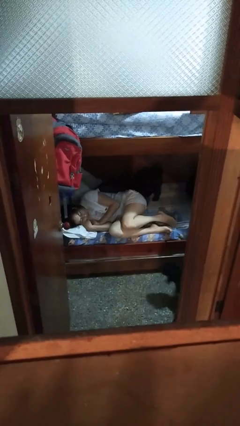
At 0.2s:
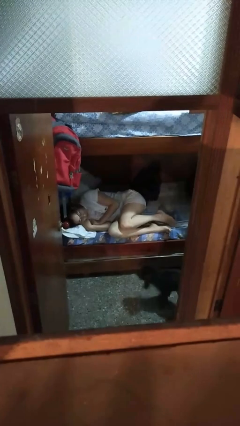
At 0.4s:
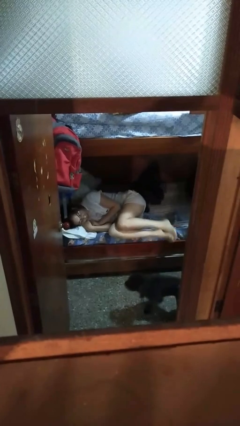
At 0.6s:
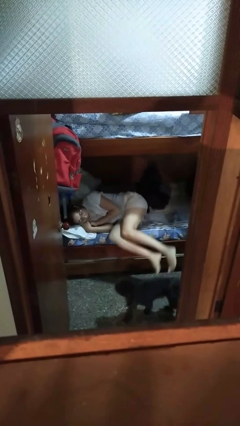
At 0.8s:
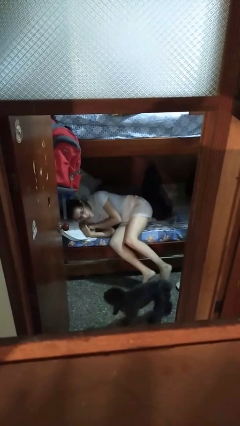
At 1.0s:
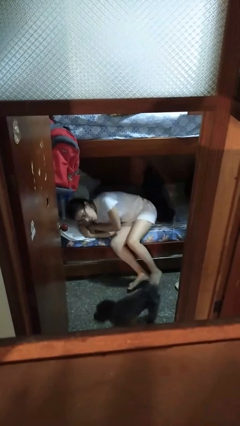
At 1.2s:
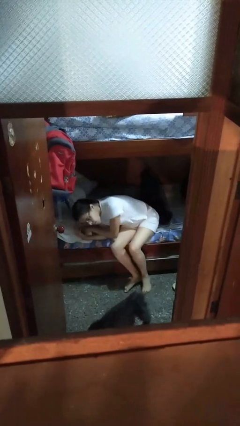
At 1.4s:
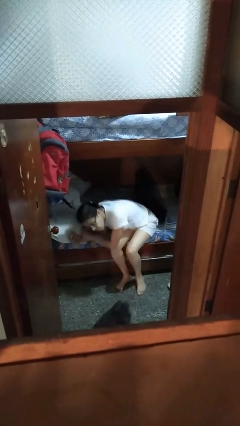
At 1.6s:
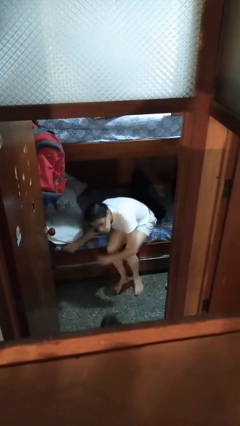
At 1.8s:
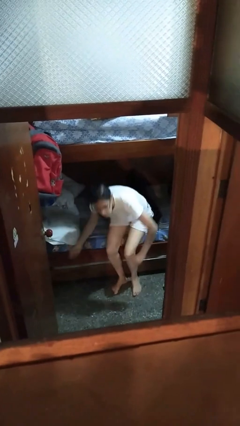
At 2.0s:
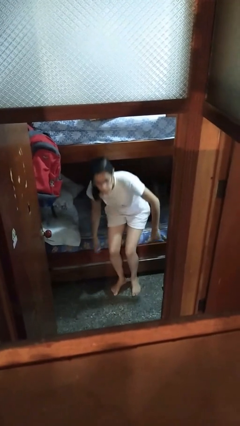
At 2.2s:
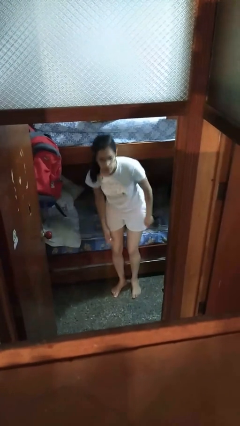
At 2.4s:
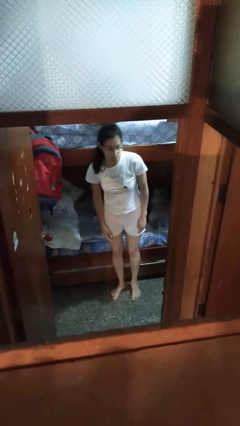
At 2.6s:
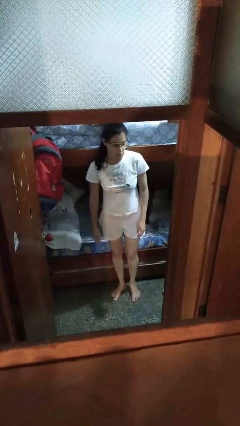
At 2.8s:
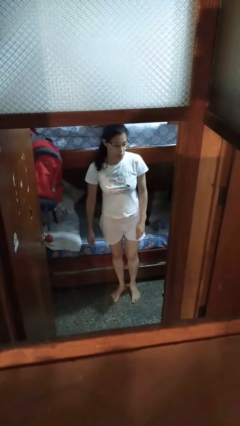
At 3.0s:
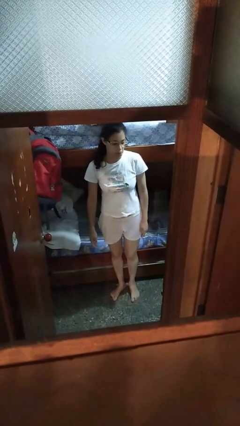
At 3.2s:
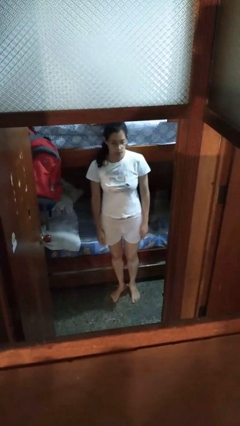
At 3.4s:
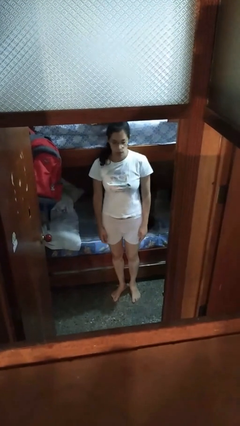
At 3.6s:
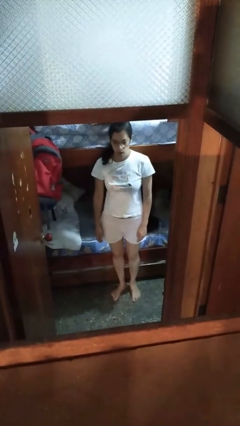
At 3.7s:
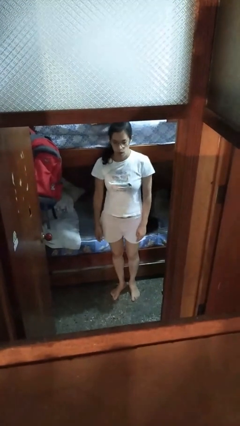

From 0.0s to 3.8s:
person stands up

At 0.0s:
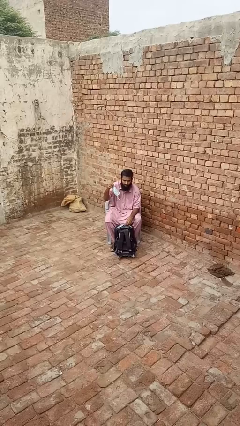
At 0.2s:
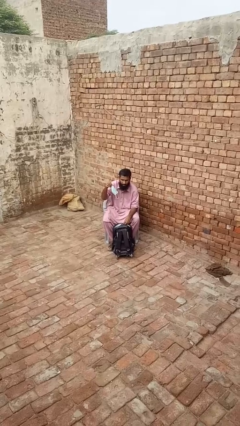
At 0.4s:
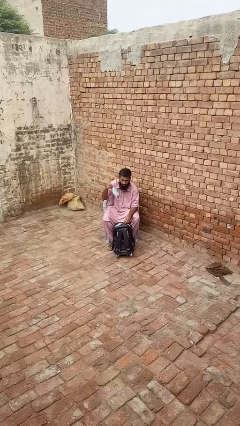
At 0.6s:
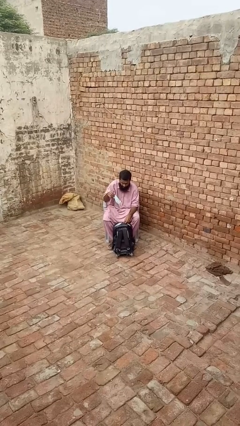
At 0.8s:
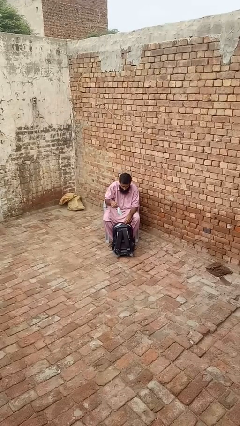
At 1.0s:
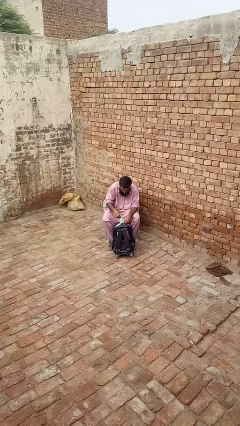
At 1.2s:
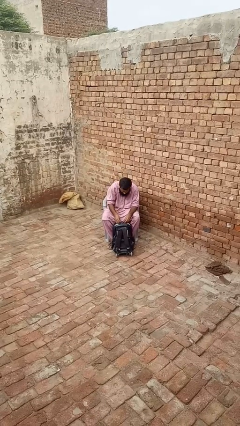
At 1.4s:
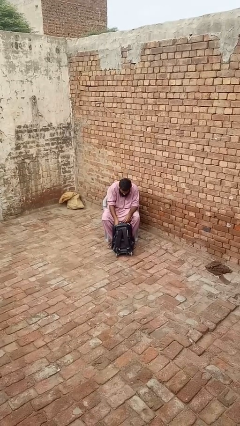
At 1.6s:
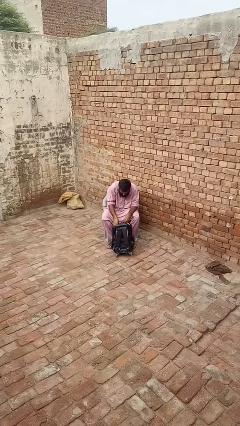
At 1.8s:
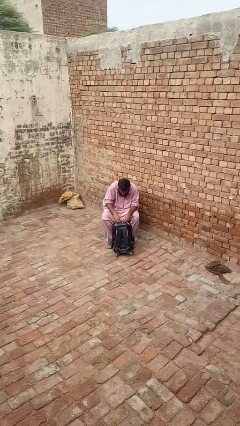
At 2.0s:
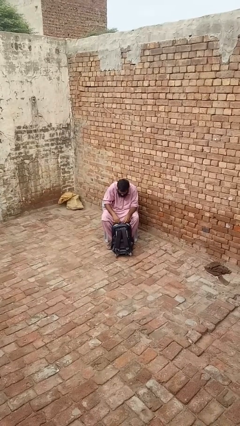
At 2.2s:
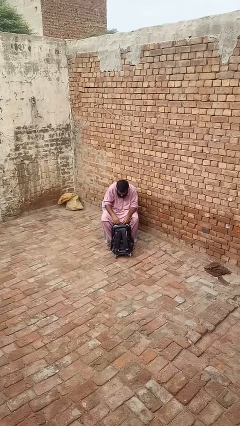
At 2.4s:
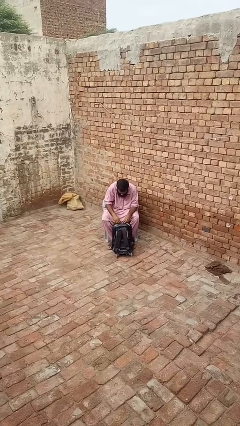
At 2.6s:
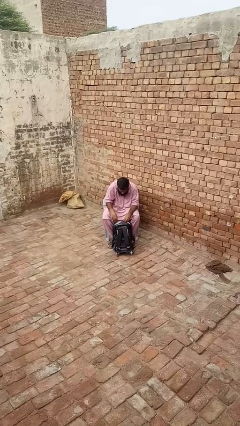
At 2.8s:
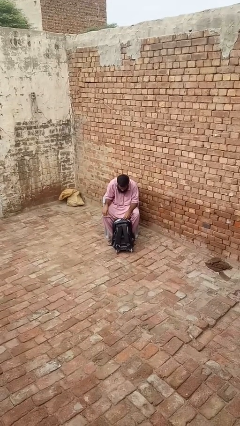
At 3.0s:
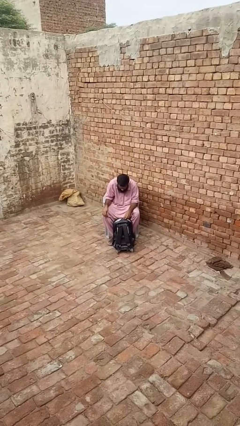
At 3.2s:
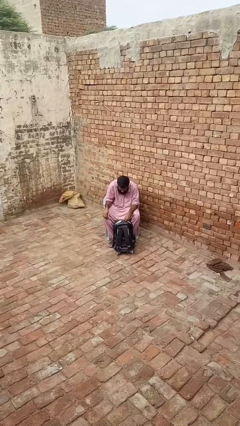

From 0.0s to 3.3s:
person puts object into backpack

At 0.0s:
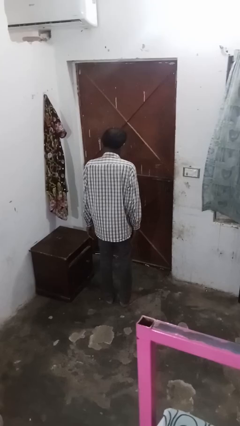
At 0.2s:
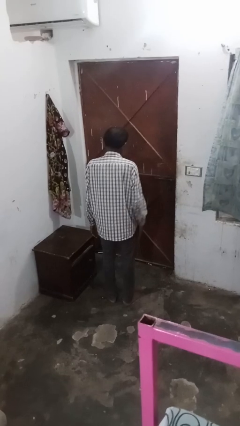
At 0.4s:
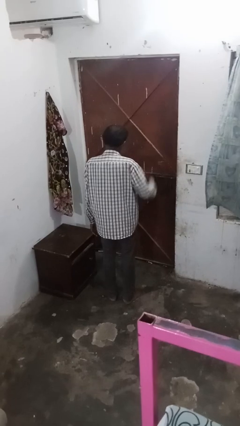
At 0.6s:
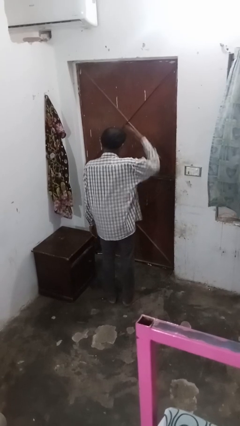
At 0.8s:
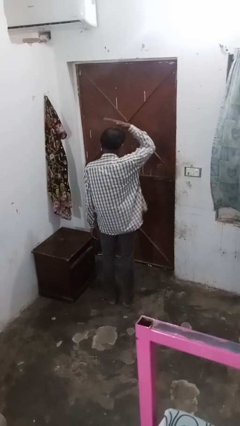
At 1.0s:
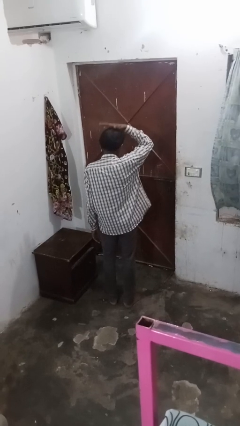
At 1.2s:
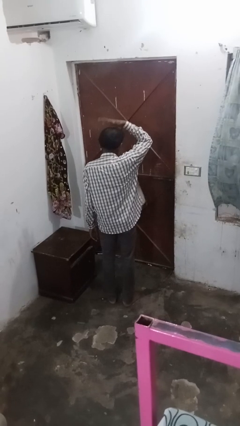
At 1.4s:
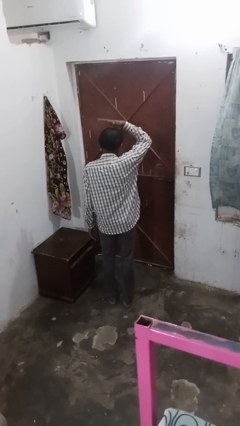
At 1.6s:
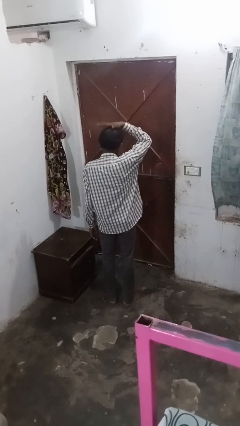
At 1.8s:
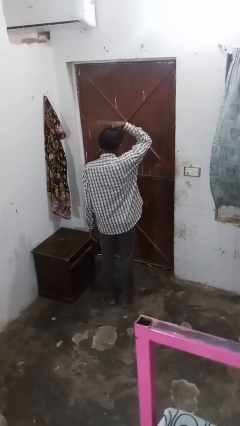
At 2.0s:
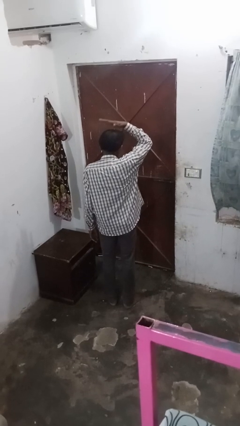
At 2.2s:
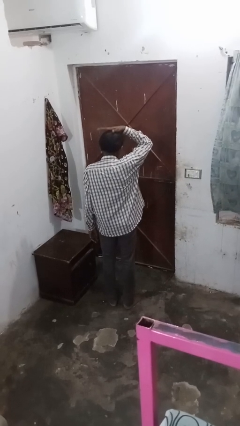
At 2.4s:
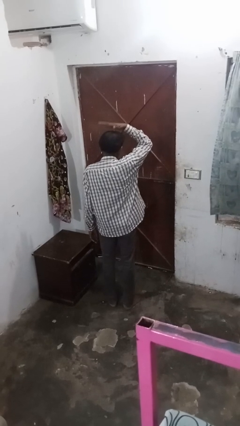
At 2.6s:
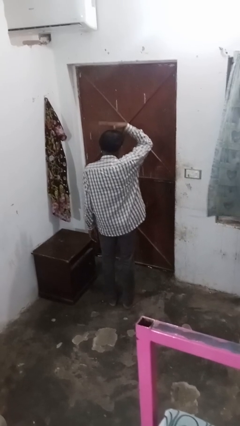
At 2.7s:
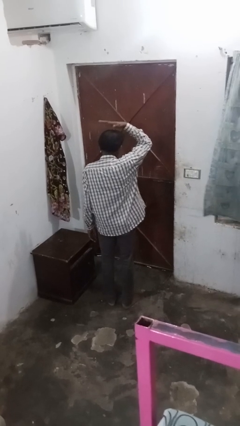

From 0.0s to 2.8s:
person pats head

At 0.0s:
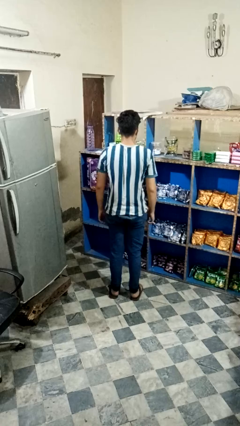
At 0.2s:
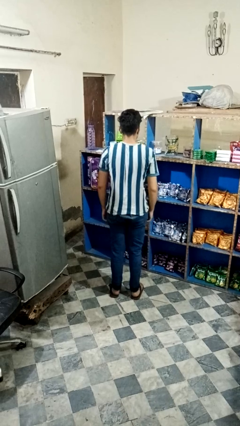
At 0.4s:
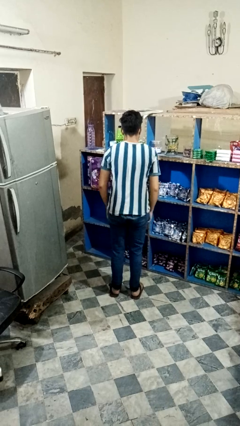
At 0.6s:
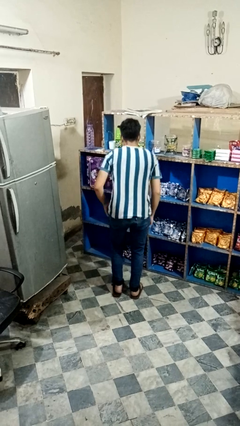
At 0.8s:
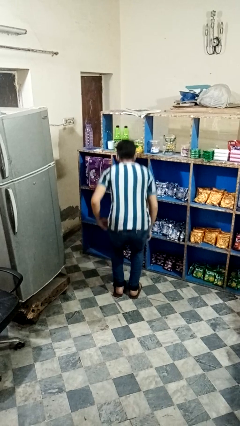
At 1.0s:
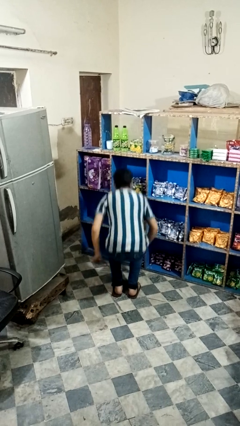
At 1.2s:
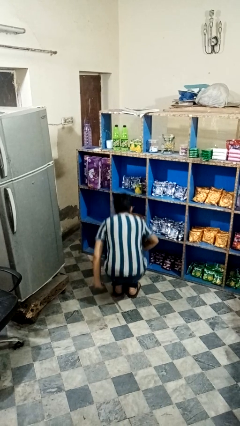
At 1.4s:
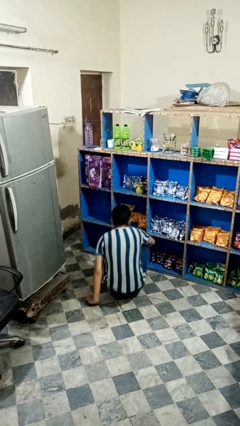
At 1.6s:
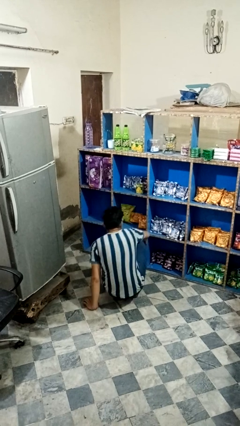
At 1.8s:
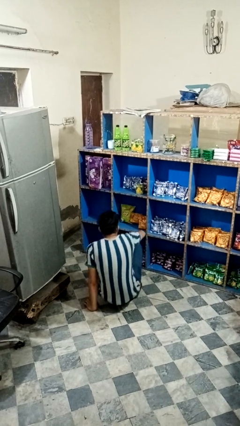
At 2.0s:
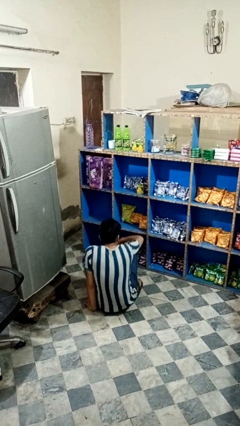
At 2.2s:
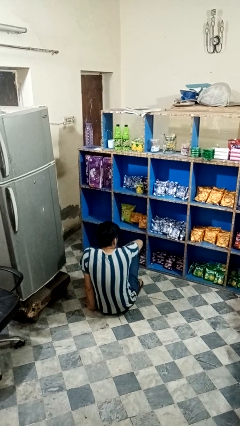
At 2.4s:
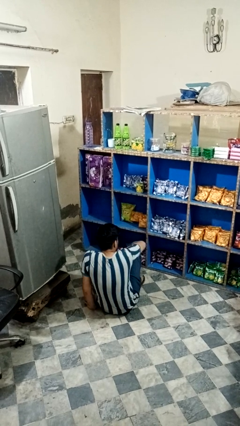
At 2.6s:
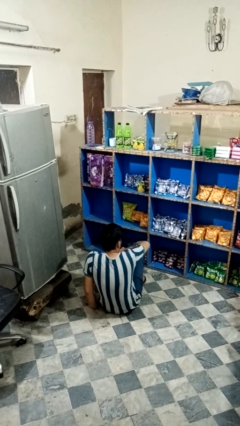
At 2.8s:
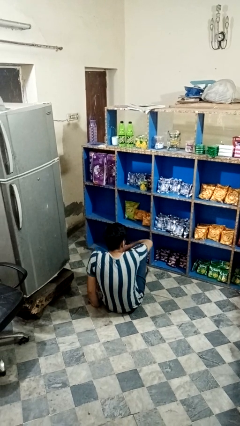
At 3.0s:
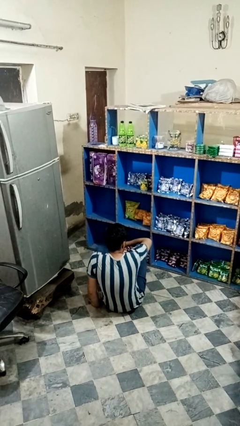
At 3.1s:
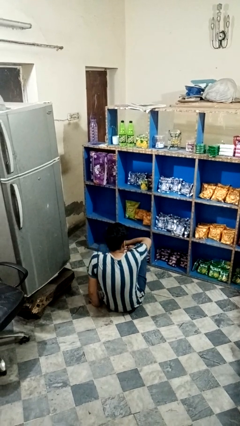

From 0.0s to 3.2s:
person sits crisscross

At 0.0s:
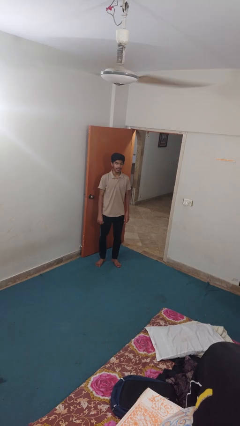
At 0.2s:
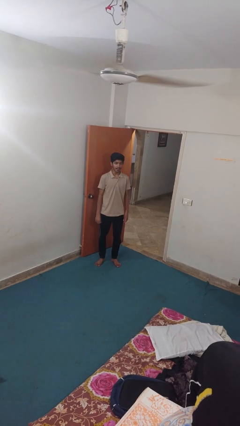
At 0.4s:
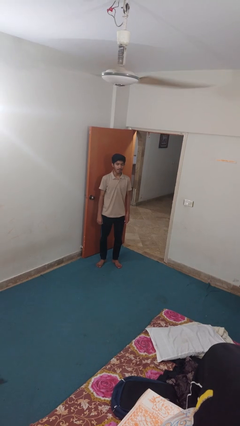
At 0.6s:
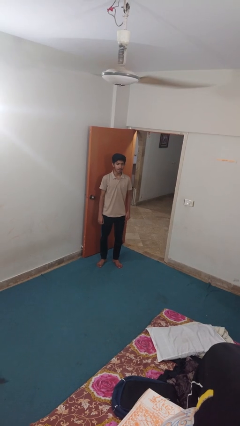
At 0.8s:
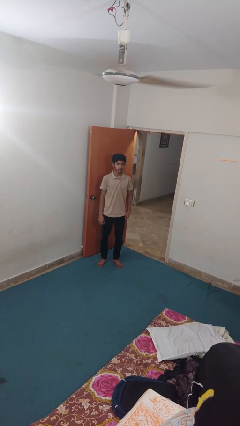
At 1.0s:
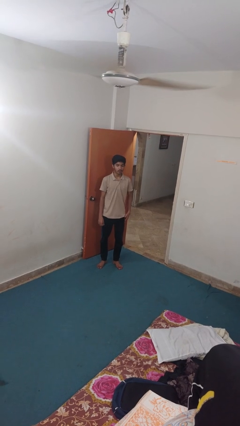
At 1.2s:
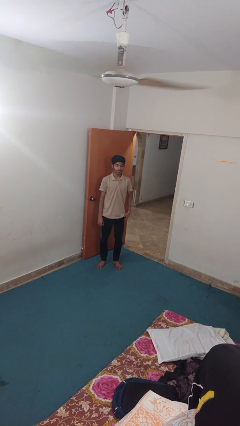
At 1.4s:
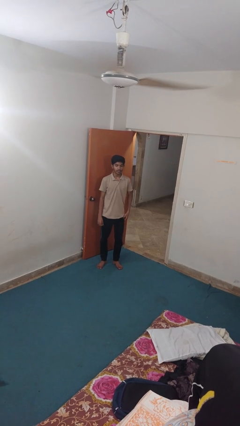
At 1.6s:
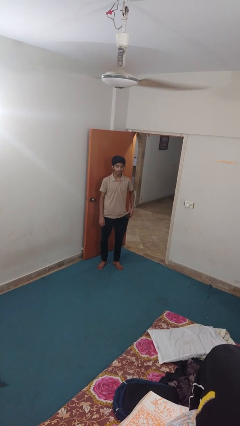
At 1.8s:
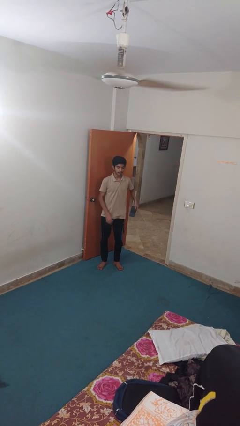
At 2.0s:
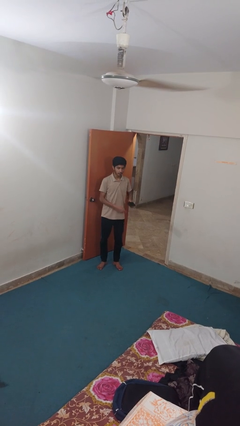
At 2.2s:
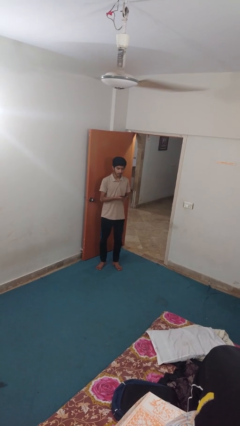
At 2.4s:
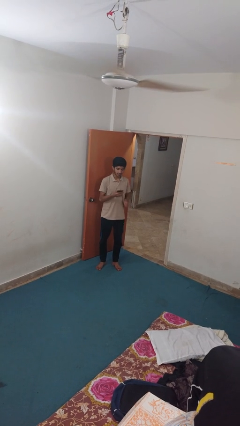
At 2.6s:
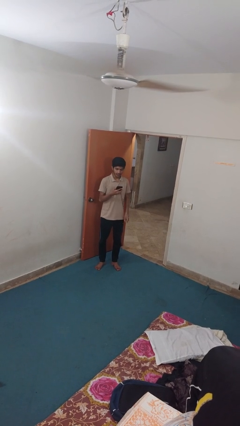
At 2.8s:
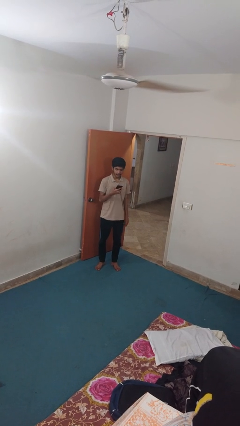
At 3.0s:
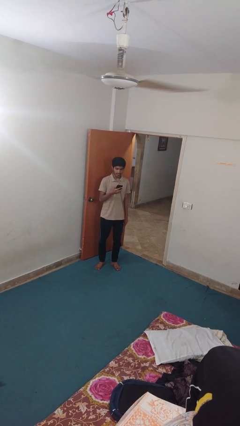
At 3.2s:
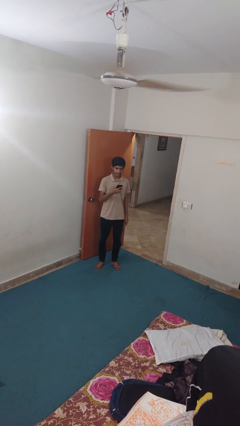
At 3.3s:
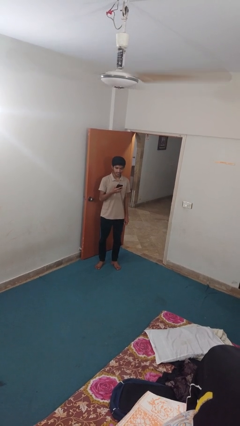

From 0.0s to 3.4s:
person takes phone from pocket

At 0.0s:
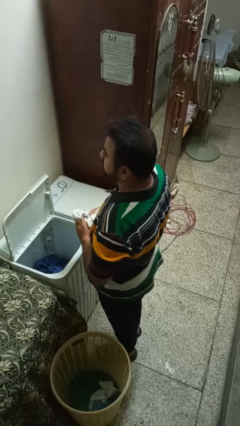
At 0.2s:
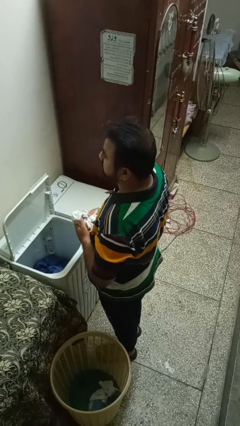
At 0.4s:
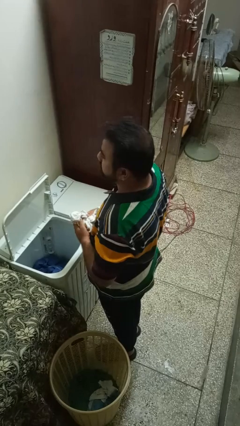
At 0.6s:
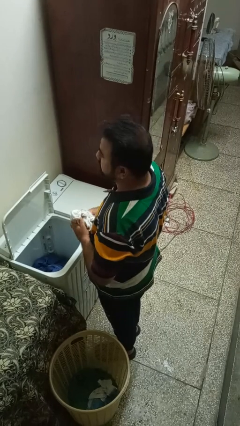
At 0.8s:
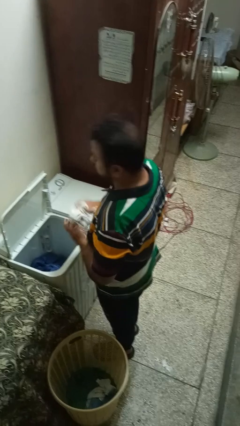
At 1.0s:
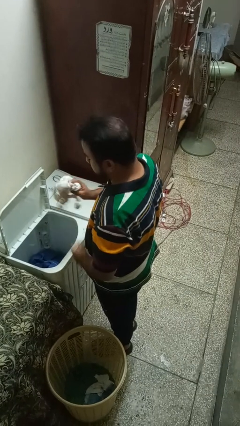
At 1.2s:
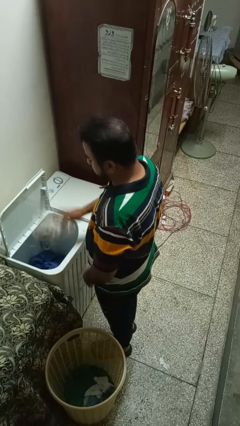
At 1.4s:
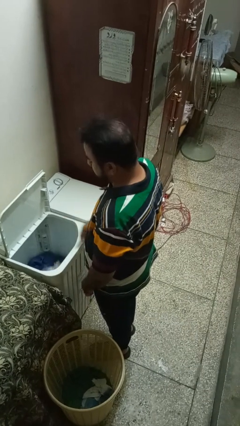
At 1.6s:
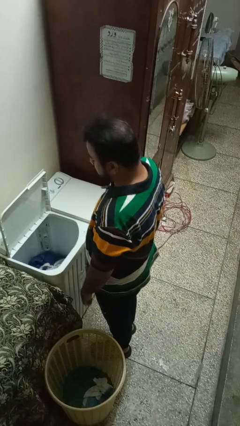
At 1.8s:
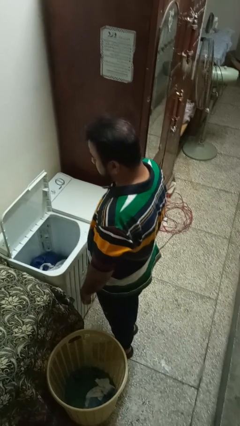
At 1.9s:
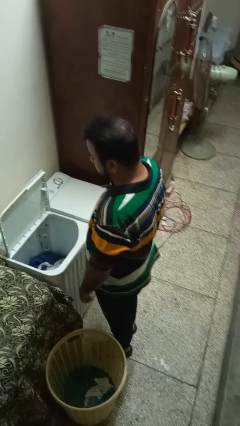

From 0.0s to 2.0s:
person loads clotheswasher
